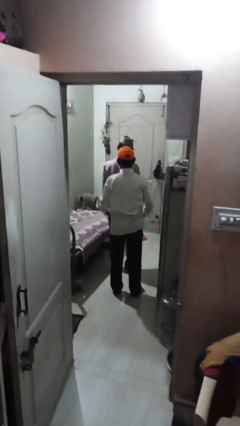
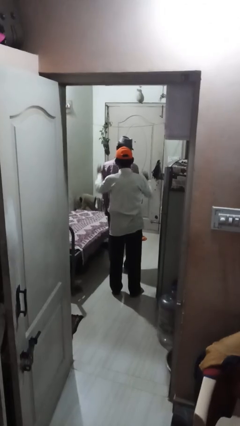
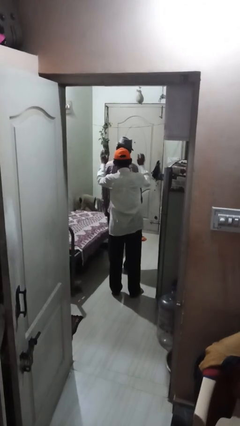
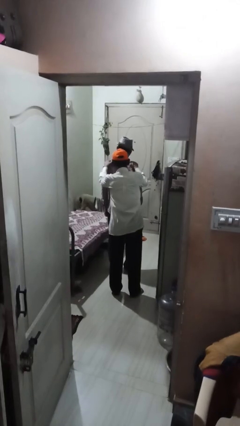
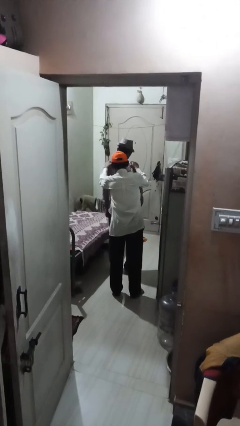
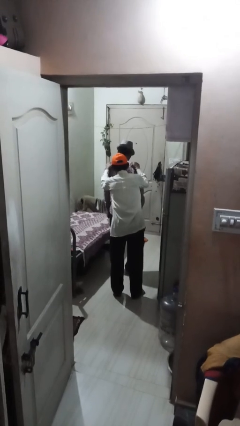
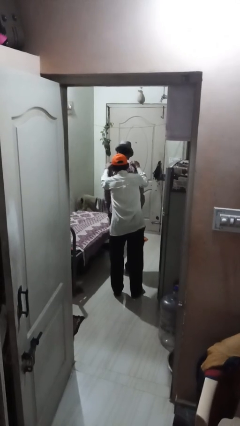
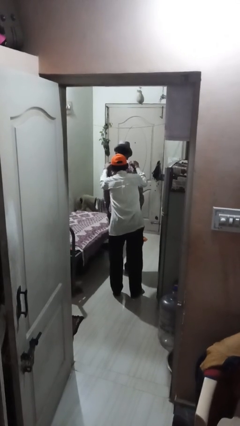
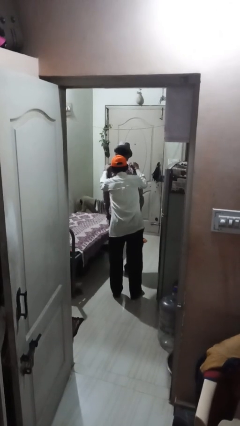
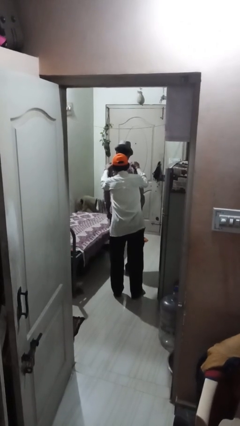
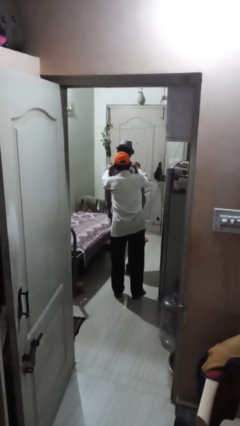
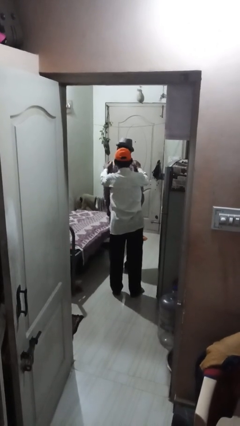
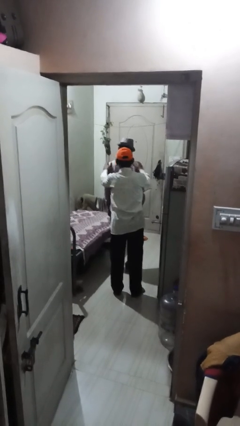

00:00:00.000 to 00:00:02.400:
person touches back of person

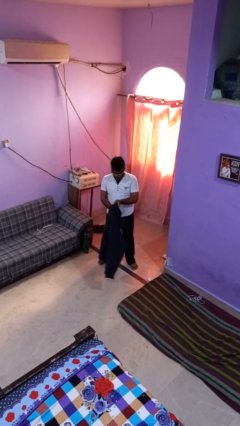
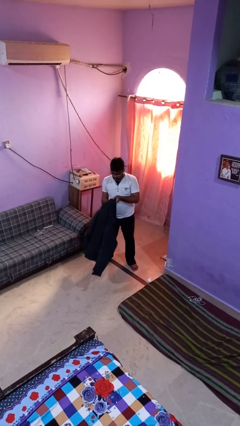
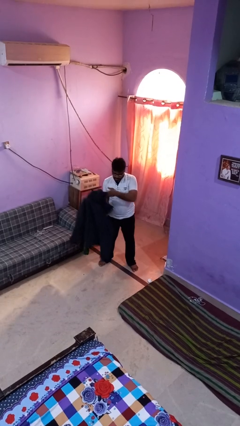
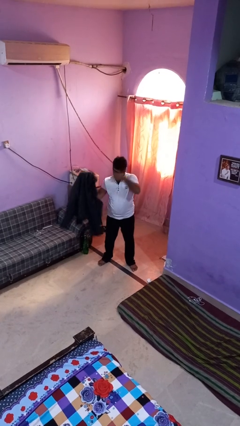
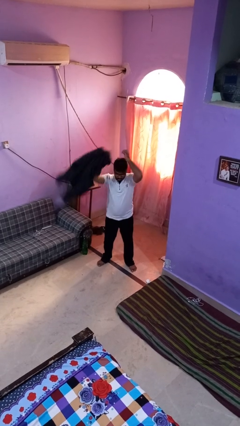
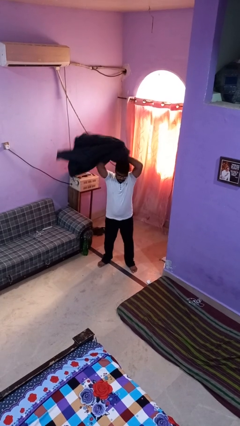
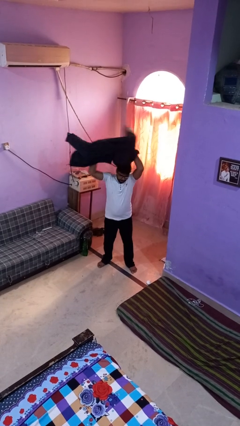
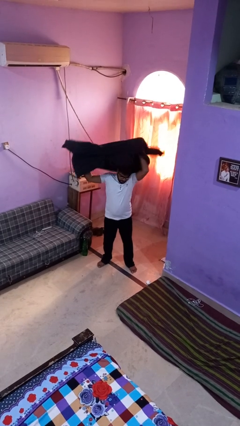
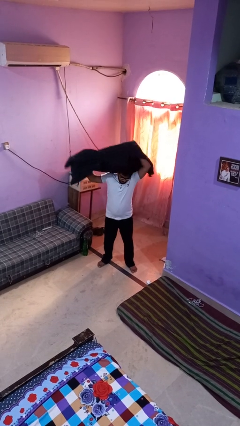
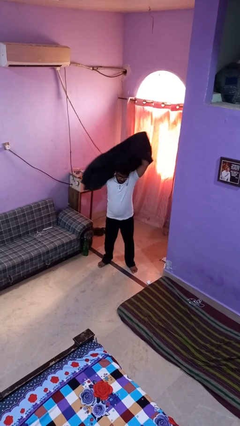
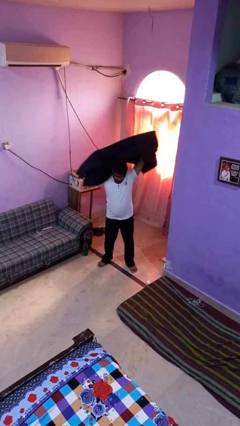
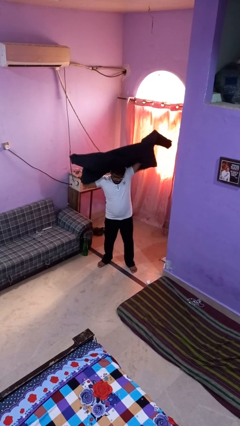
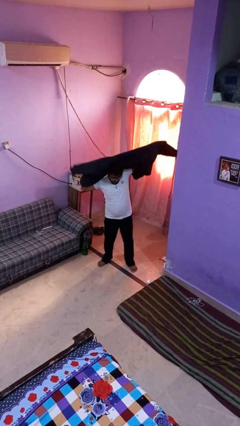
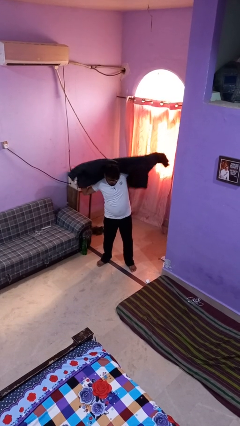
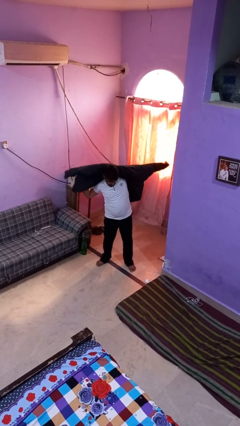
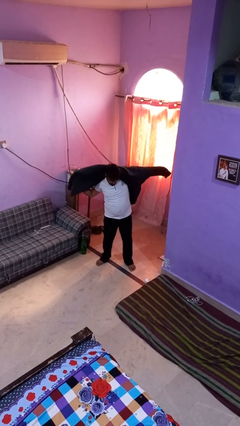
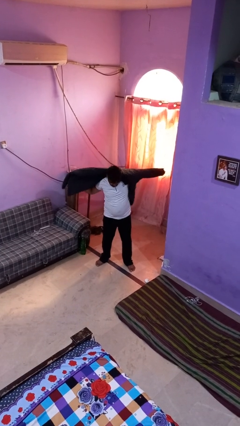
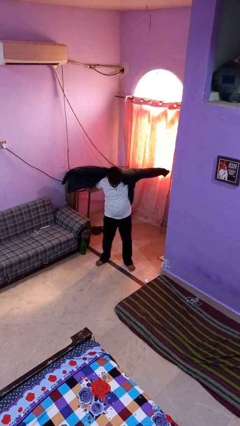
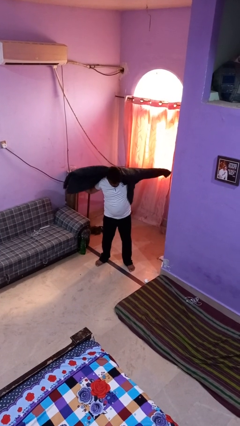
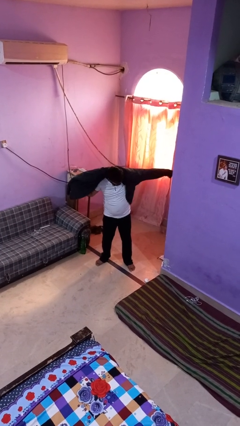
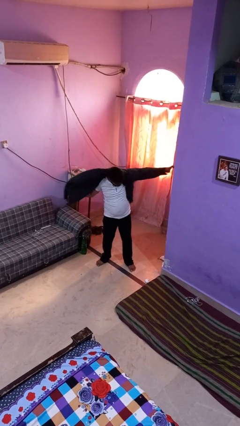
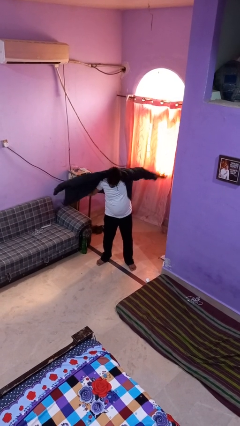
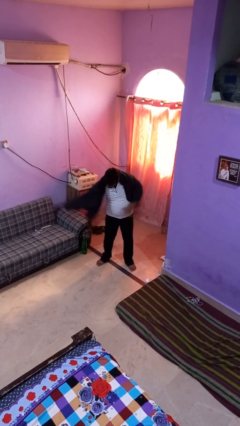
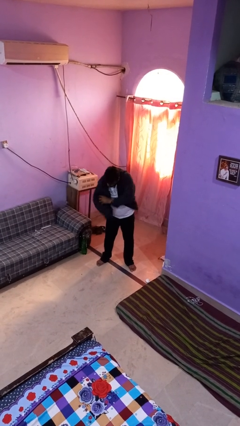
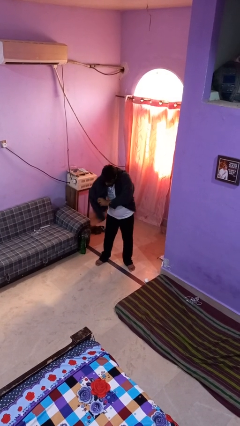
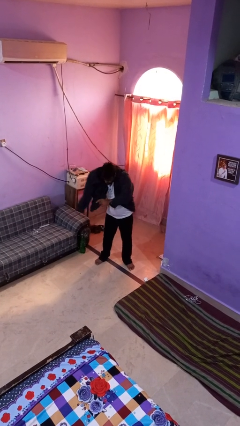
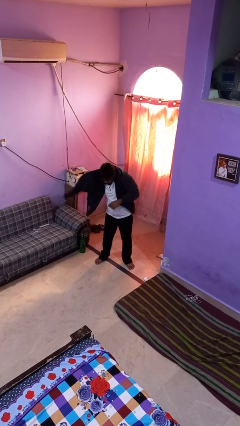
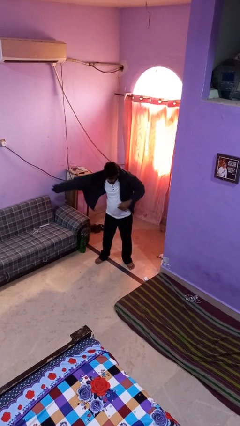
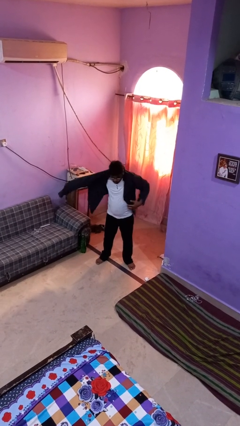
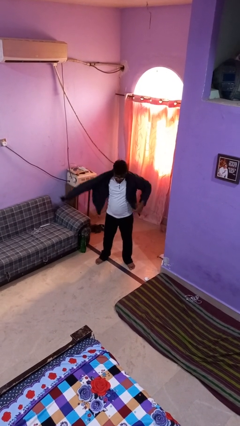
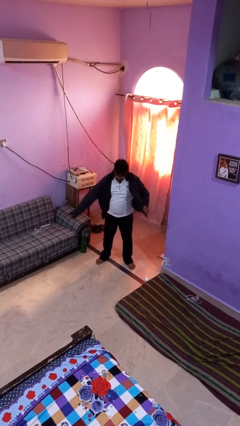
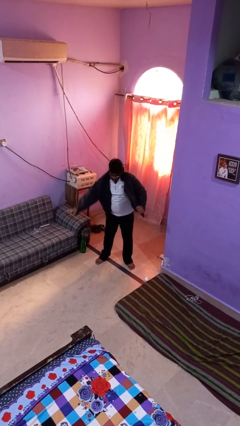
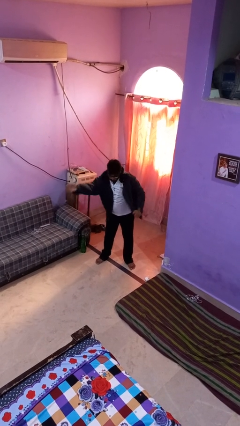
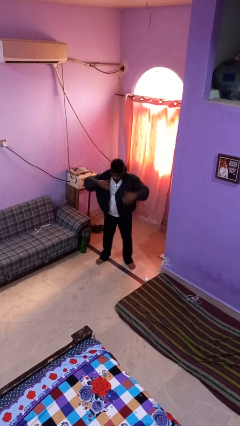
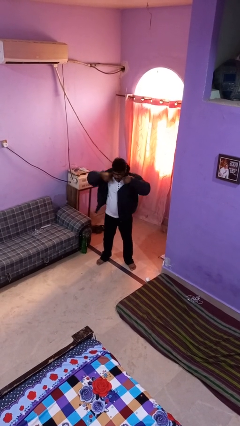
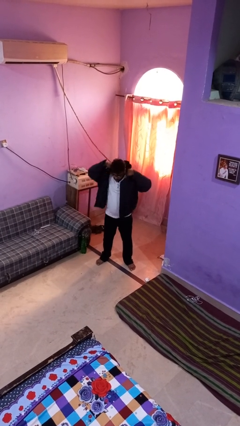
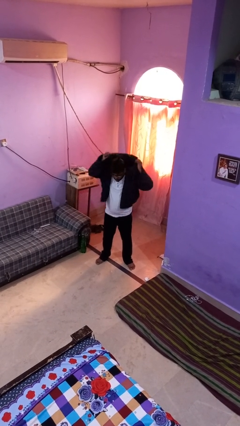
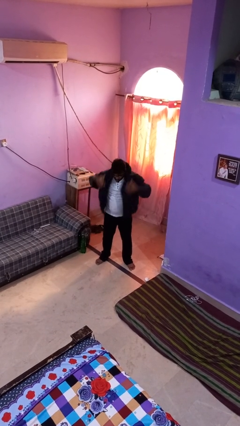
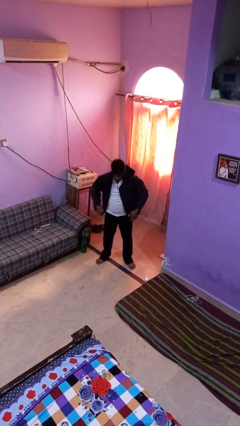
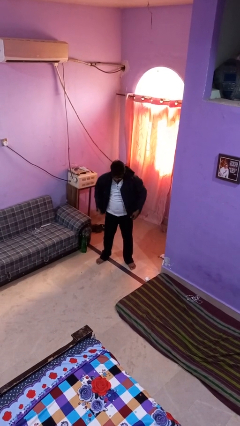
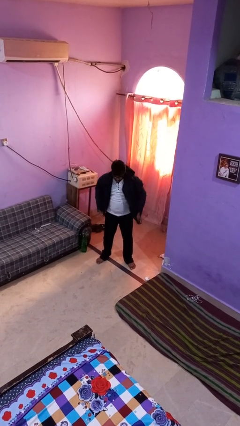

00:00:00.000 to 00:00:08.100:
person puts on jacket

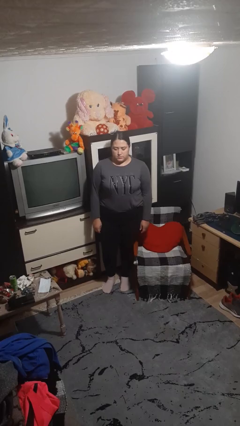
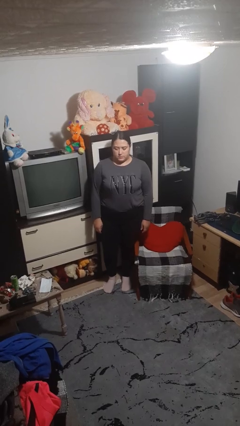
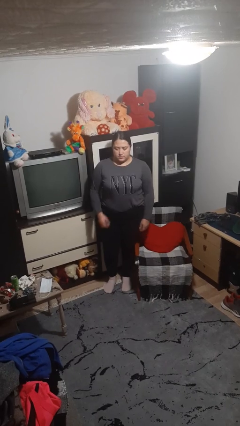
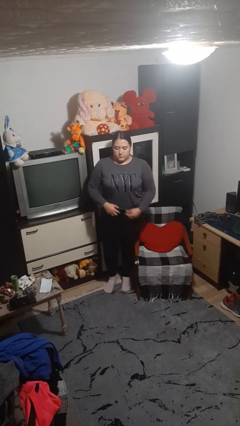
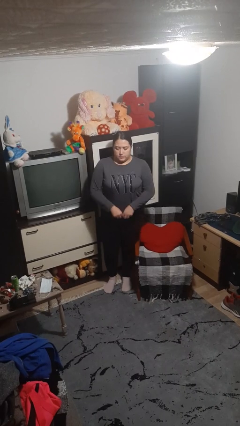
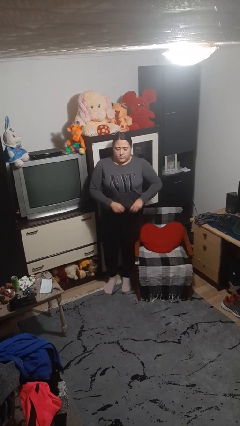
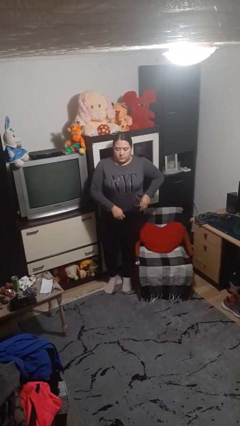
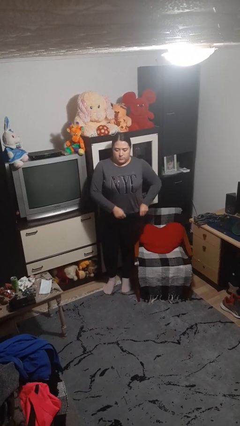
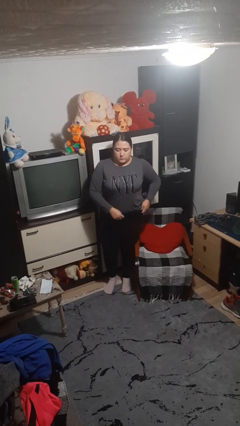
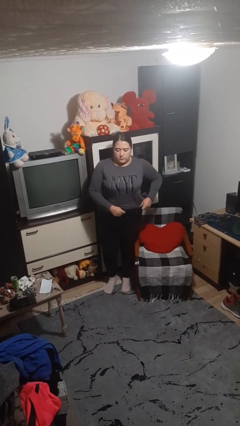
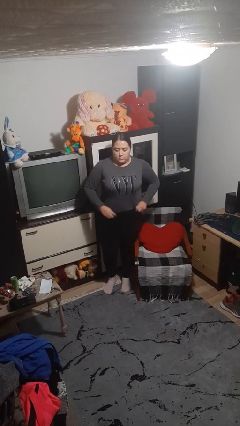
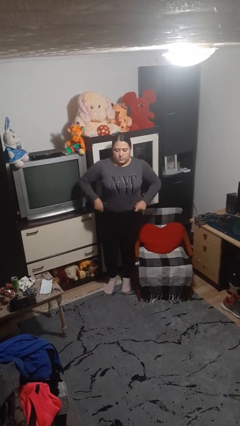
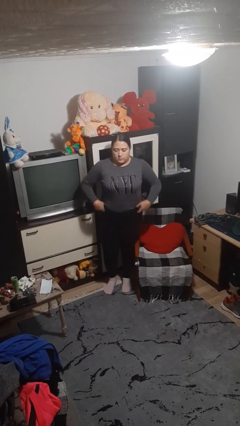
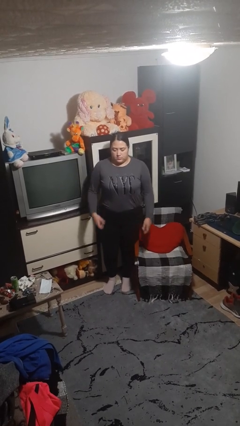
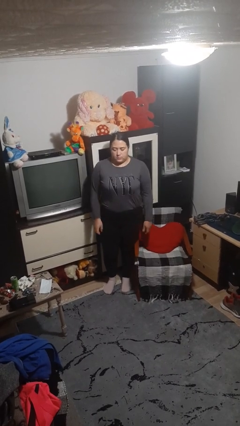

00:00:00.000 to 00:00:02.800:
person hikes up pants

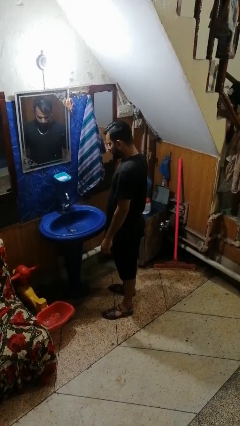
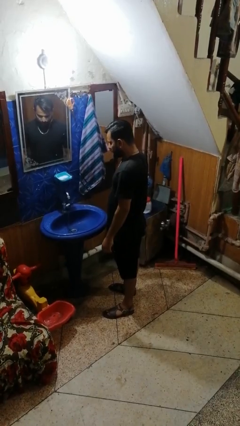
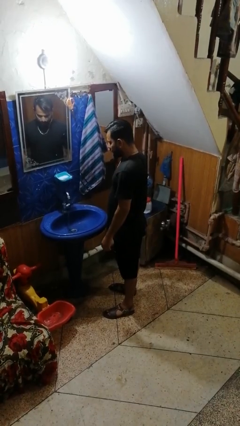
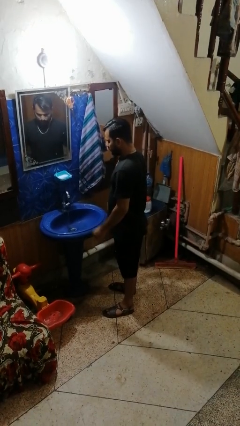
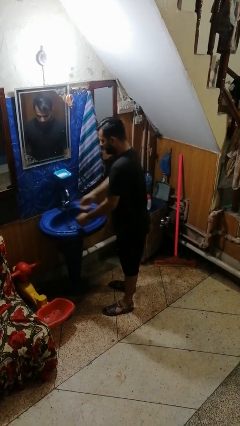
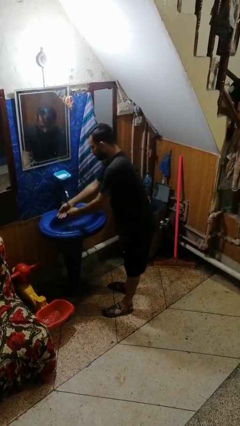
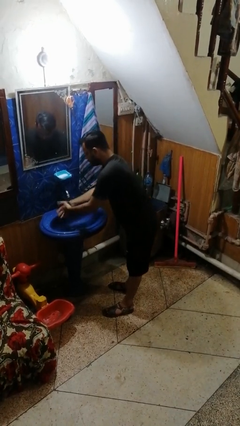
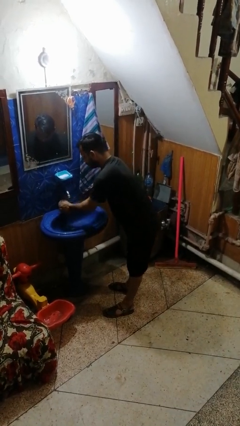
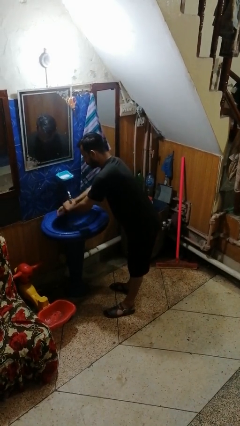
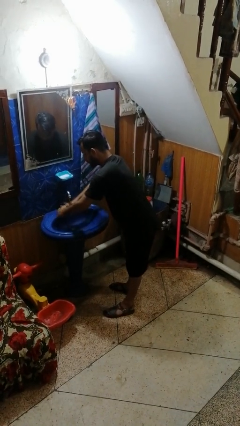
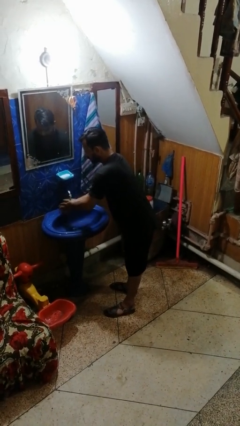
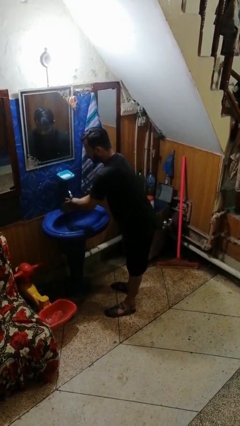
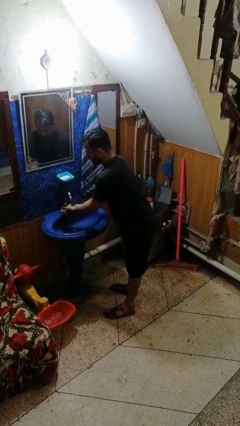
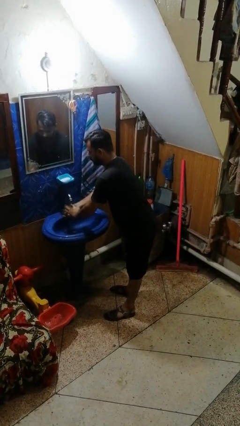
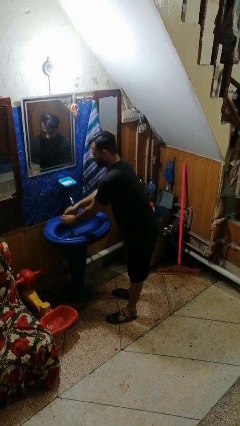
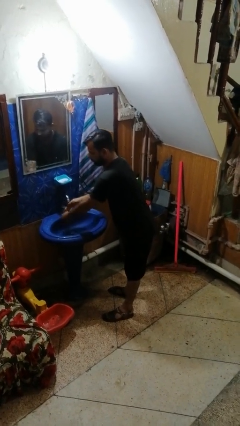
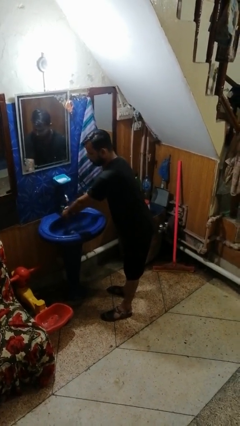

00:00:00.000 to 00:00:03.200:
person washes hands

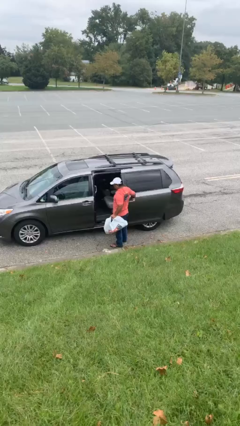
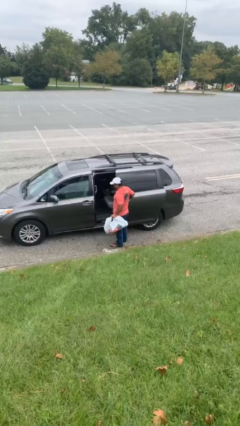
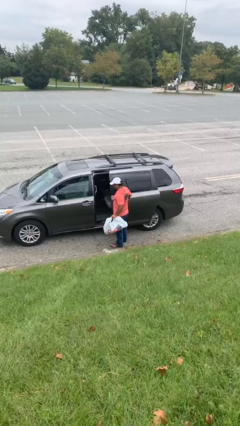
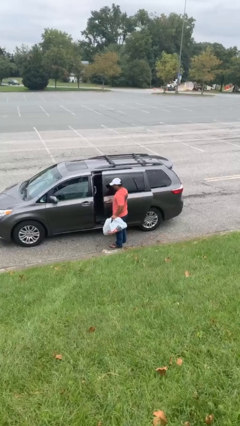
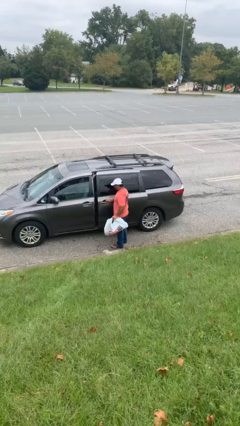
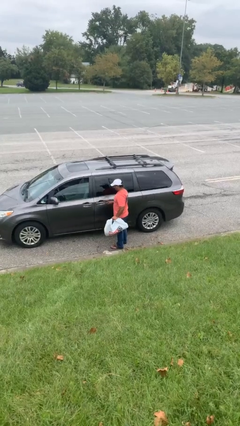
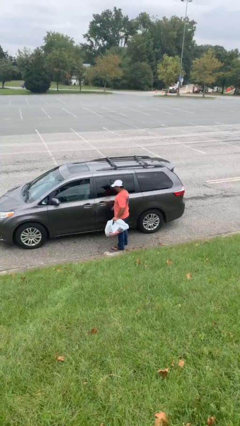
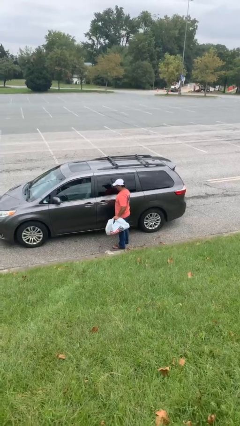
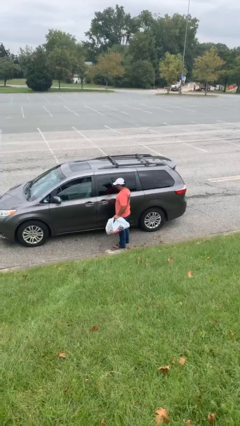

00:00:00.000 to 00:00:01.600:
person closes car door
